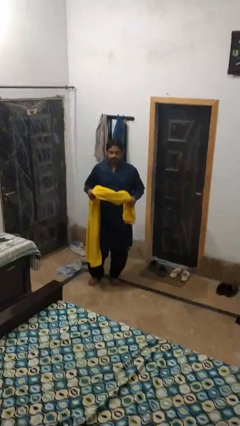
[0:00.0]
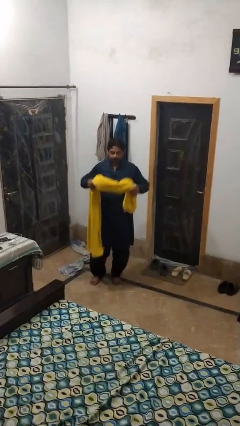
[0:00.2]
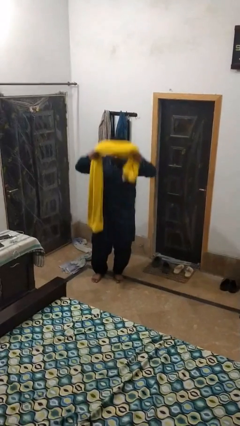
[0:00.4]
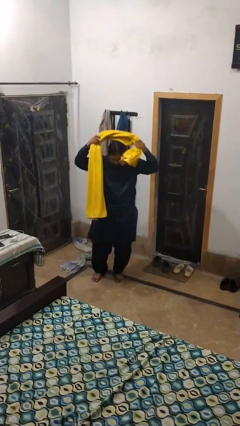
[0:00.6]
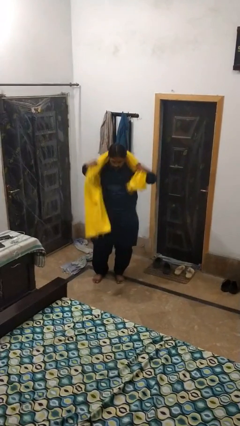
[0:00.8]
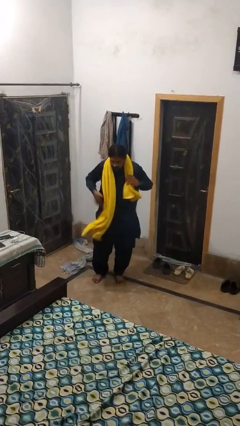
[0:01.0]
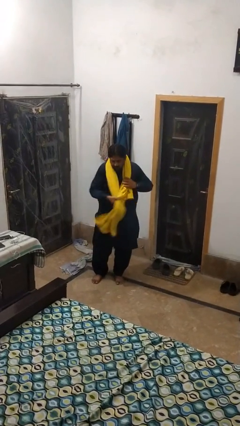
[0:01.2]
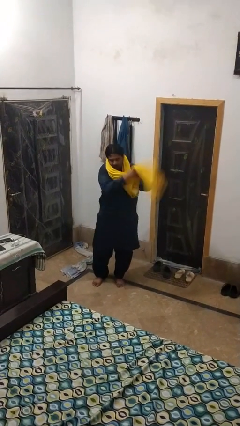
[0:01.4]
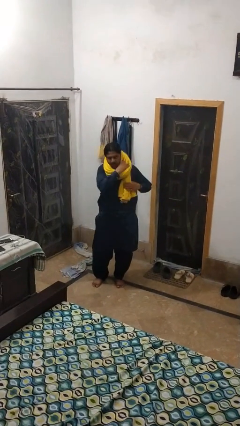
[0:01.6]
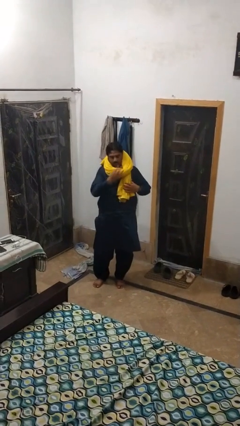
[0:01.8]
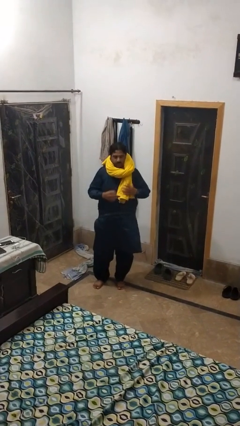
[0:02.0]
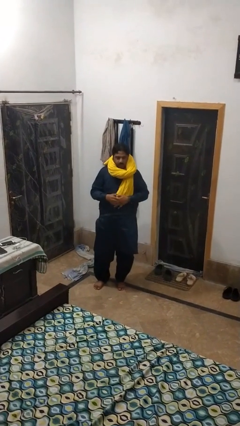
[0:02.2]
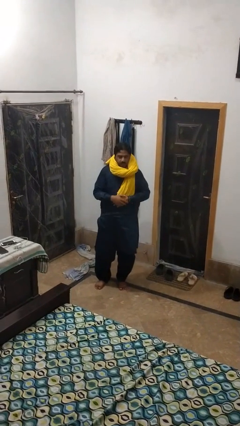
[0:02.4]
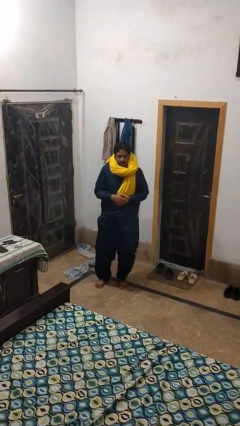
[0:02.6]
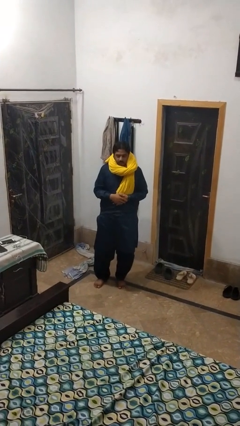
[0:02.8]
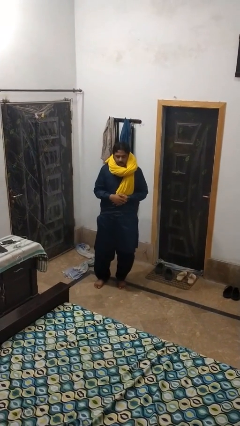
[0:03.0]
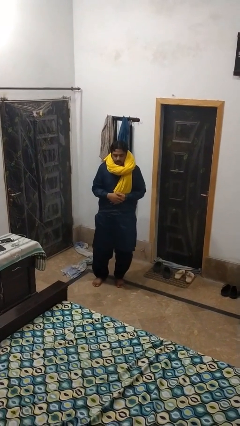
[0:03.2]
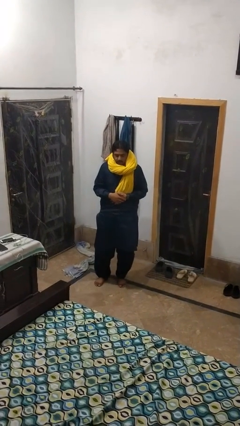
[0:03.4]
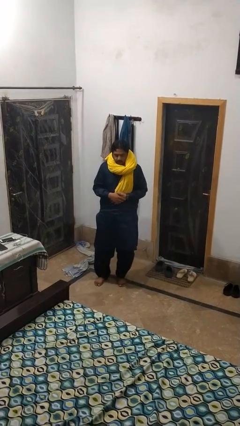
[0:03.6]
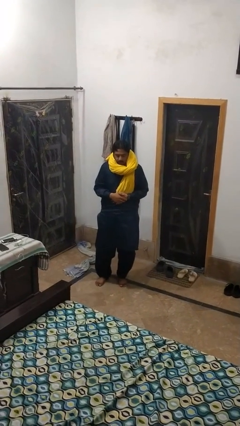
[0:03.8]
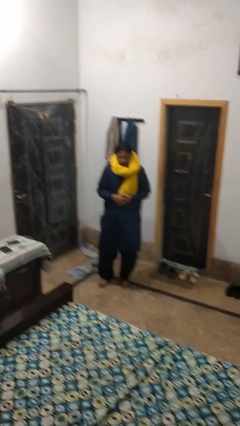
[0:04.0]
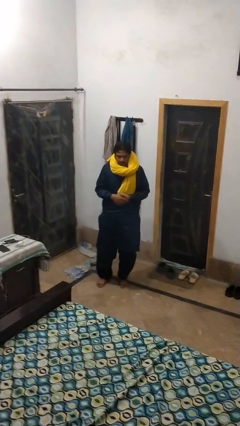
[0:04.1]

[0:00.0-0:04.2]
person puts on scarf

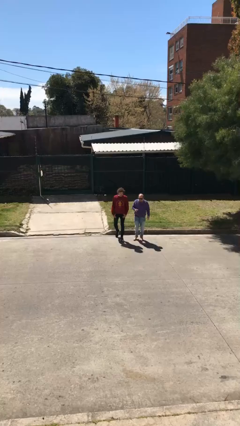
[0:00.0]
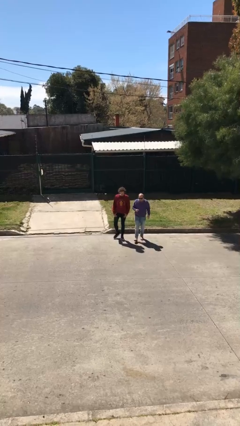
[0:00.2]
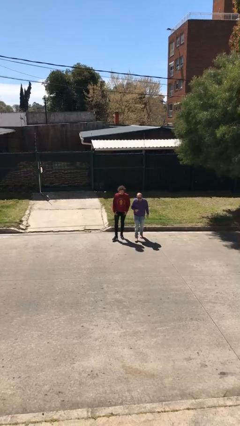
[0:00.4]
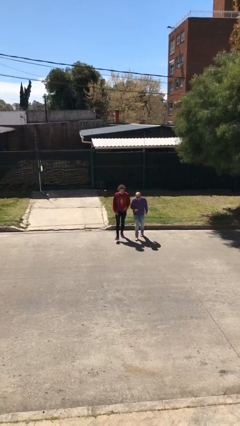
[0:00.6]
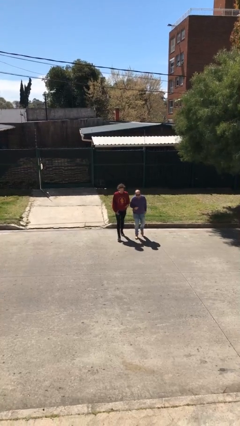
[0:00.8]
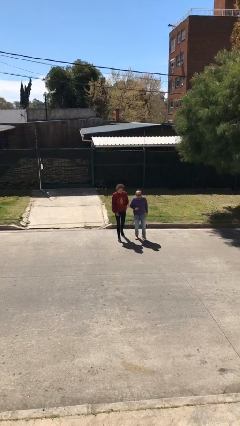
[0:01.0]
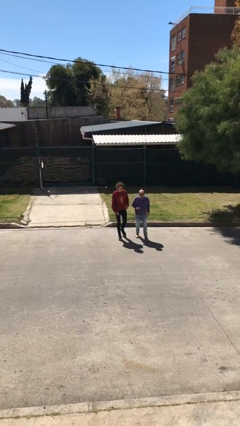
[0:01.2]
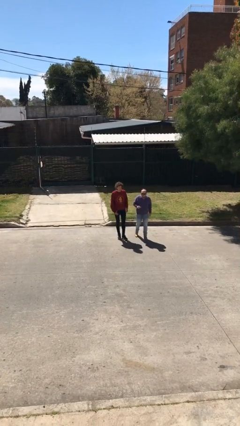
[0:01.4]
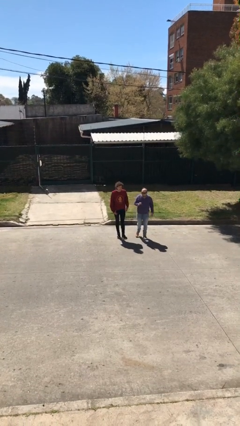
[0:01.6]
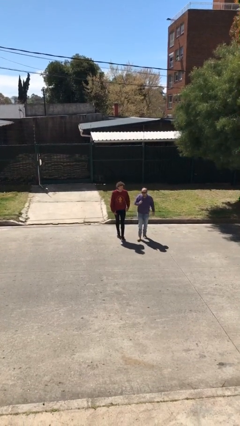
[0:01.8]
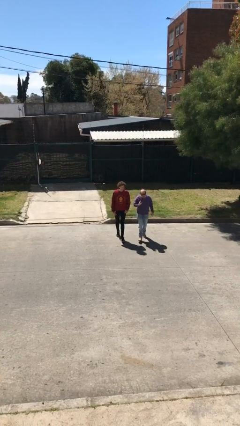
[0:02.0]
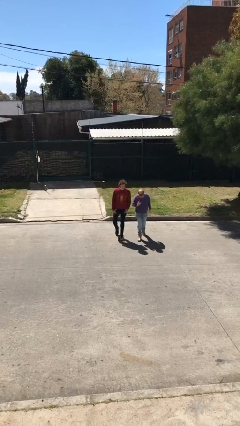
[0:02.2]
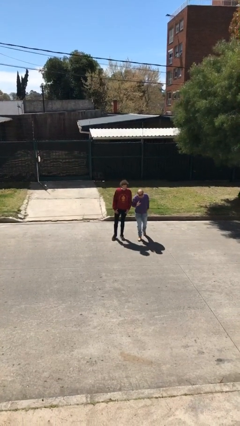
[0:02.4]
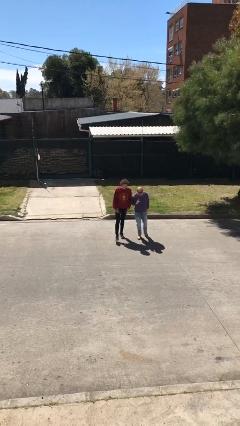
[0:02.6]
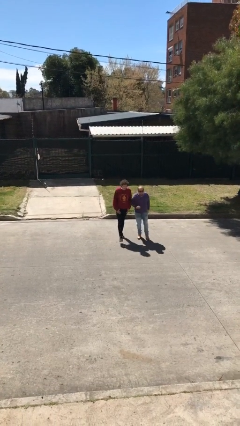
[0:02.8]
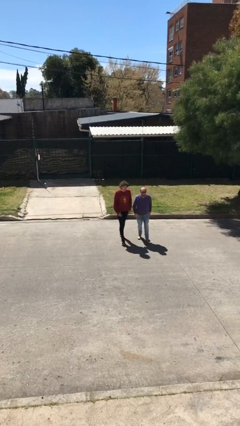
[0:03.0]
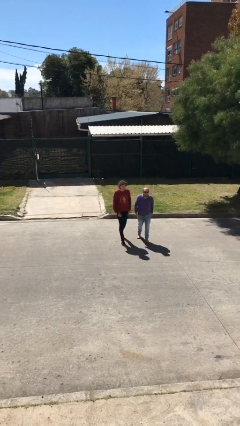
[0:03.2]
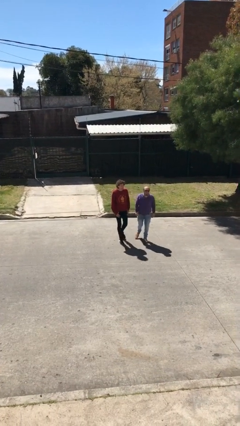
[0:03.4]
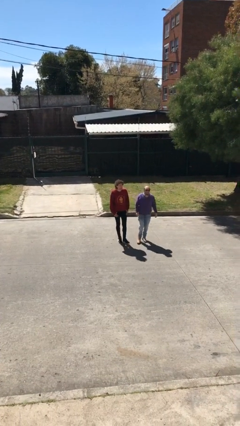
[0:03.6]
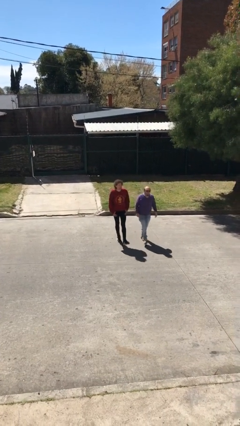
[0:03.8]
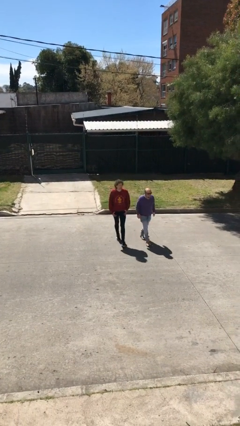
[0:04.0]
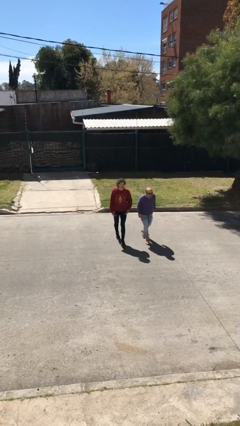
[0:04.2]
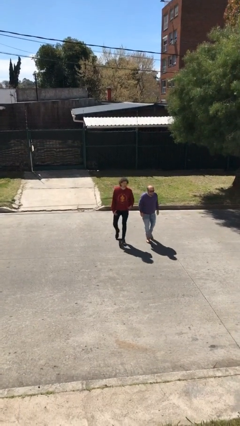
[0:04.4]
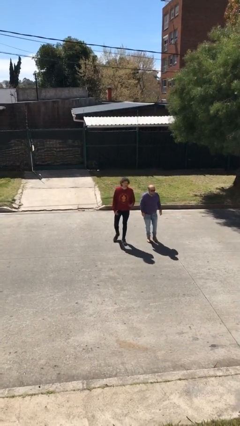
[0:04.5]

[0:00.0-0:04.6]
person talks to person

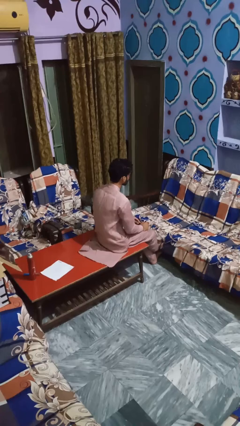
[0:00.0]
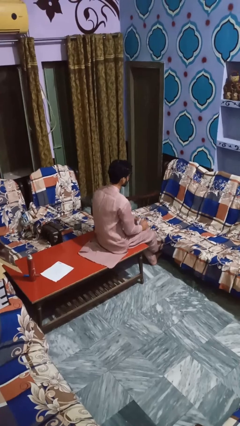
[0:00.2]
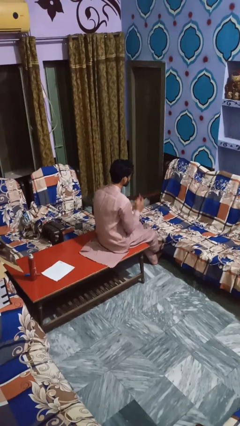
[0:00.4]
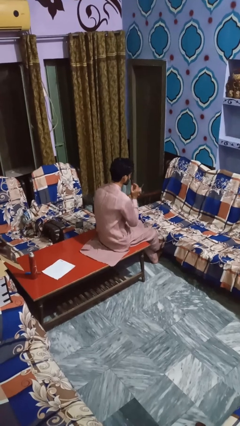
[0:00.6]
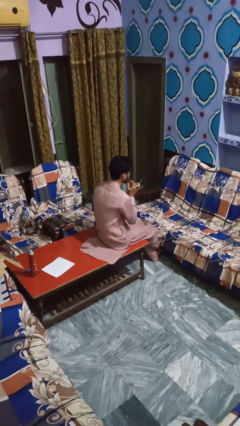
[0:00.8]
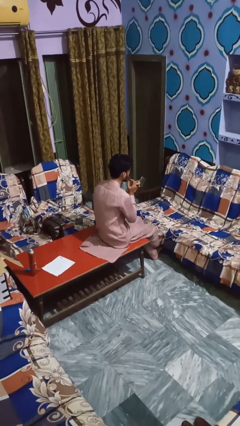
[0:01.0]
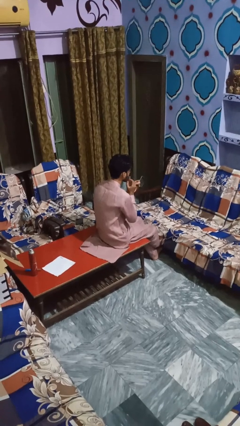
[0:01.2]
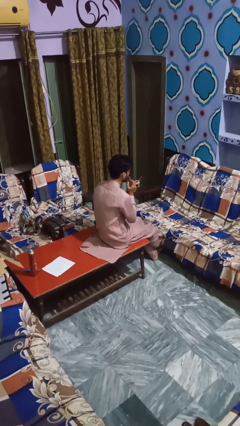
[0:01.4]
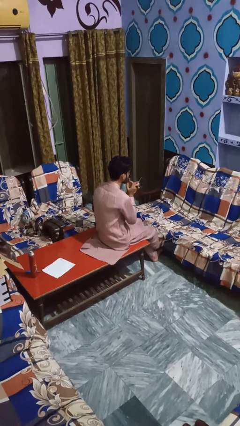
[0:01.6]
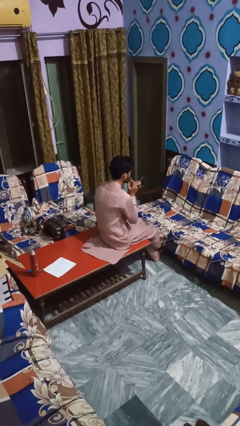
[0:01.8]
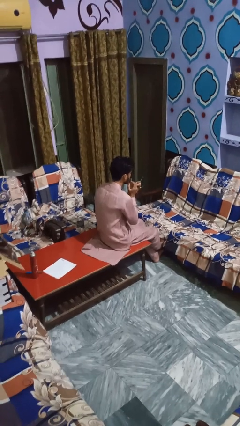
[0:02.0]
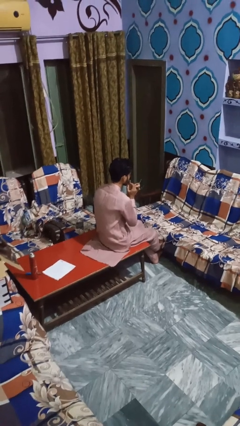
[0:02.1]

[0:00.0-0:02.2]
person applies lip makeup

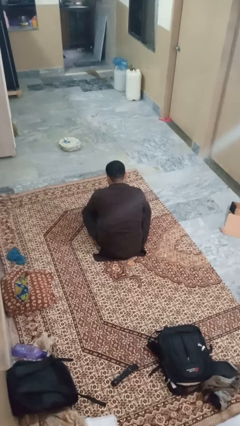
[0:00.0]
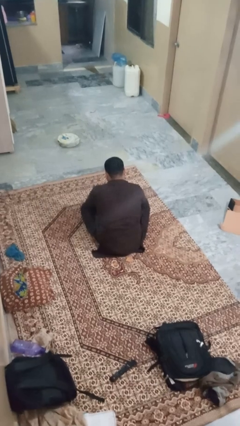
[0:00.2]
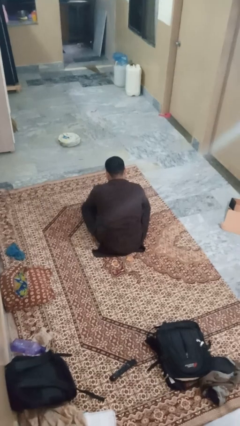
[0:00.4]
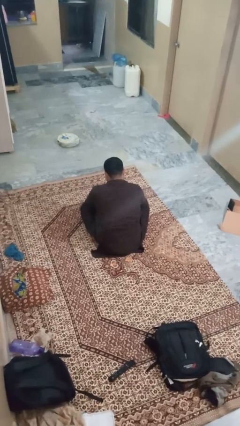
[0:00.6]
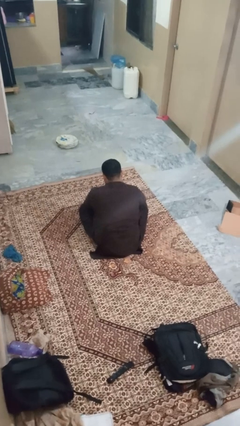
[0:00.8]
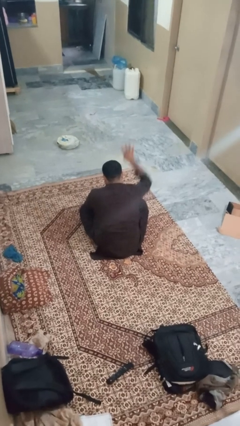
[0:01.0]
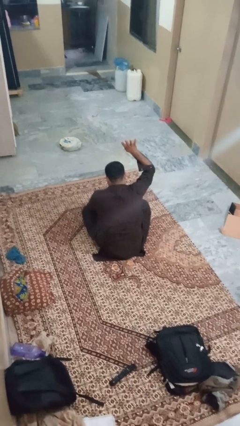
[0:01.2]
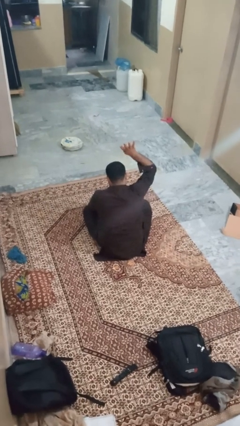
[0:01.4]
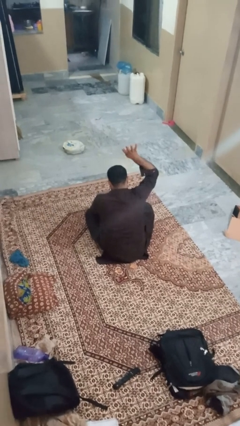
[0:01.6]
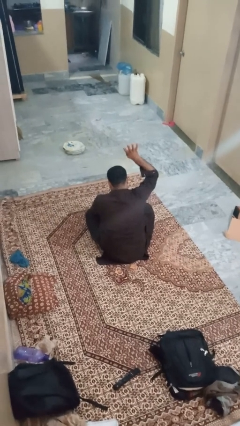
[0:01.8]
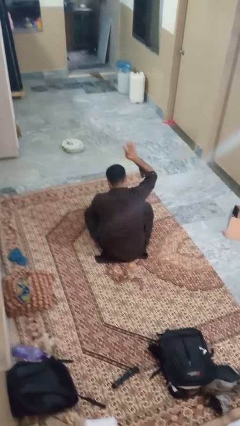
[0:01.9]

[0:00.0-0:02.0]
person gestures number four

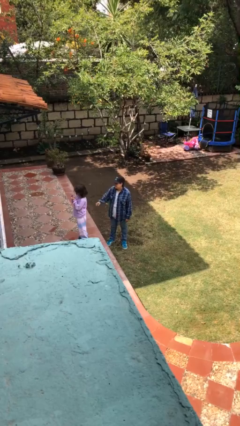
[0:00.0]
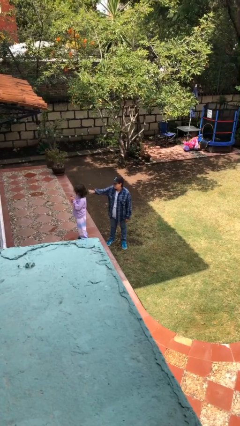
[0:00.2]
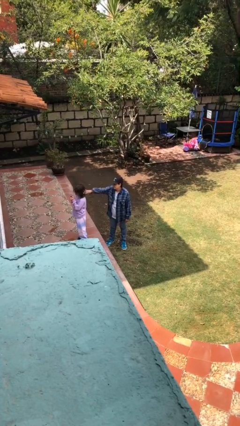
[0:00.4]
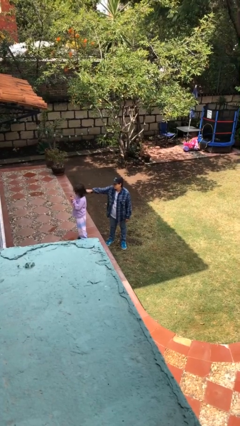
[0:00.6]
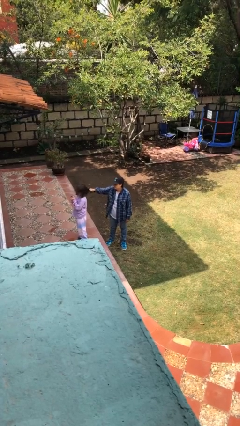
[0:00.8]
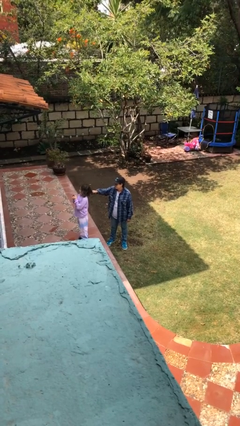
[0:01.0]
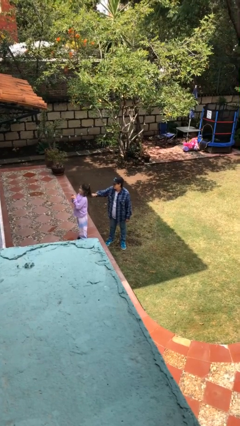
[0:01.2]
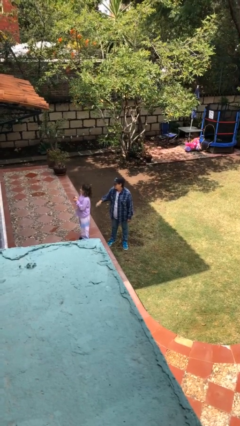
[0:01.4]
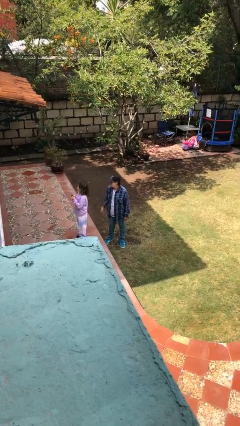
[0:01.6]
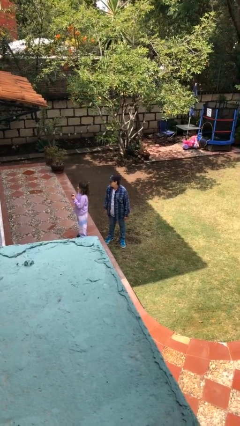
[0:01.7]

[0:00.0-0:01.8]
person grabs person by hair

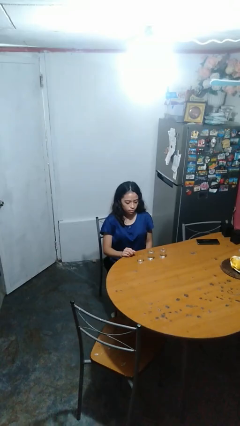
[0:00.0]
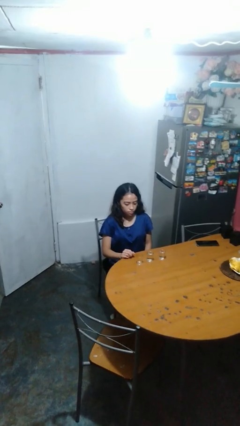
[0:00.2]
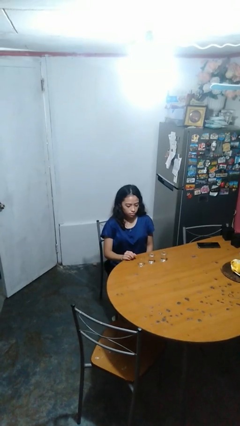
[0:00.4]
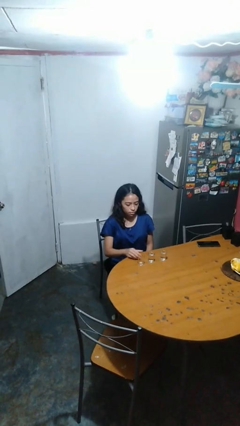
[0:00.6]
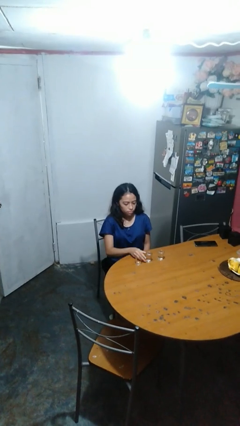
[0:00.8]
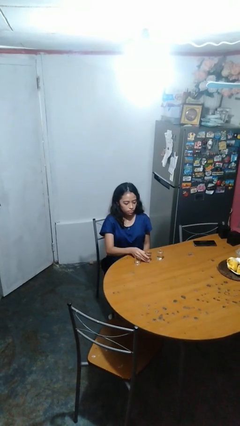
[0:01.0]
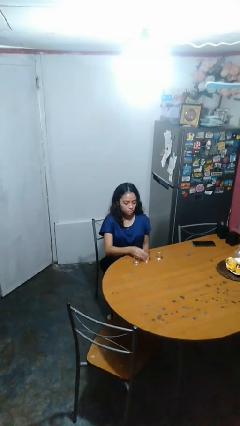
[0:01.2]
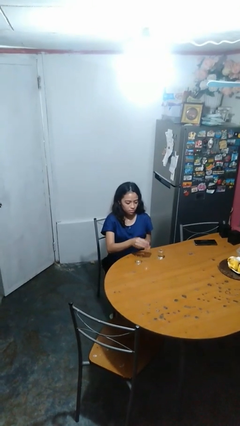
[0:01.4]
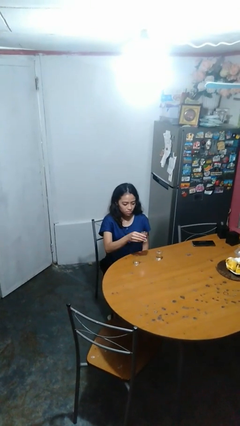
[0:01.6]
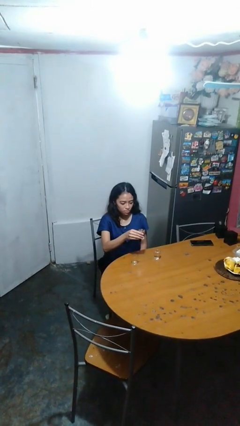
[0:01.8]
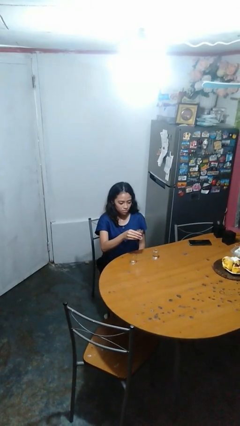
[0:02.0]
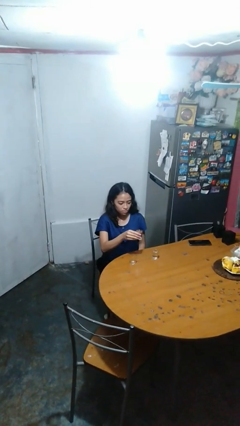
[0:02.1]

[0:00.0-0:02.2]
person picks up object from table

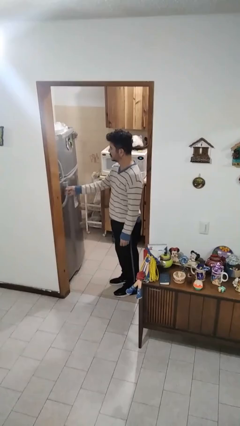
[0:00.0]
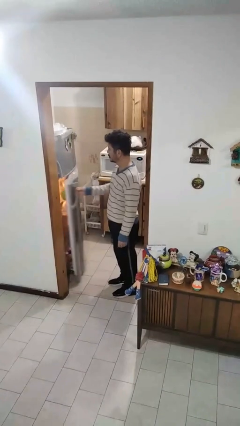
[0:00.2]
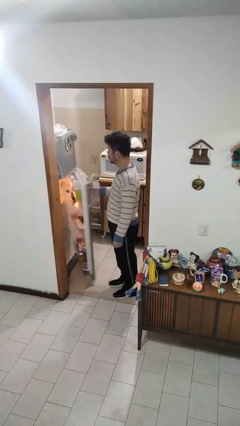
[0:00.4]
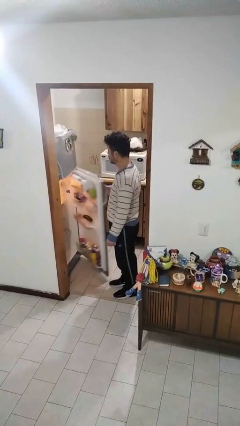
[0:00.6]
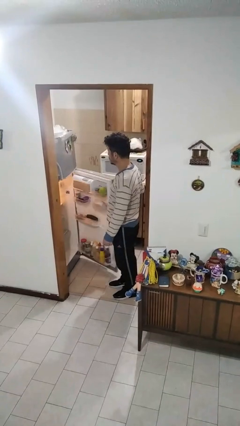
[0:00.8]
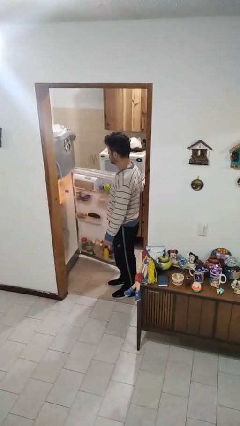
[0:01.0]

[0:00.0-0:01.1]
person opens refrigerator
